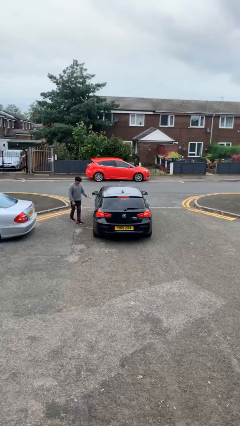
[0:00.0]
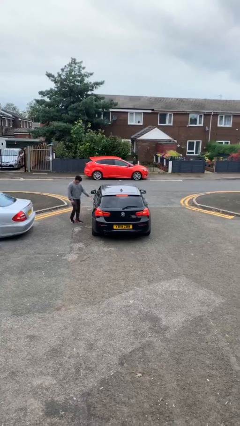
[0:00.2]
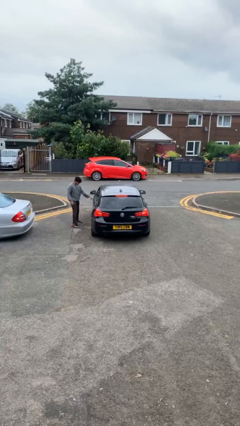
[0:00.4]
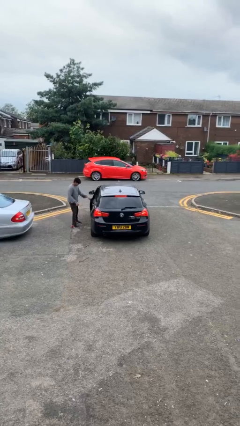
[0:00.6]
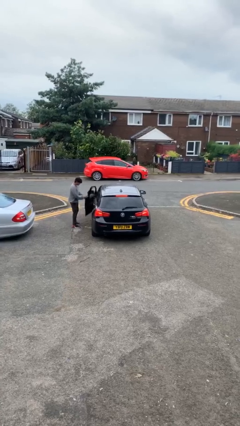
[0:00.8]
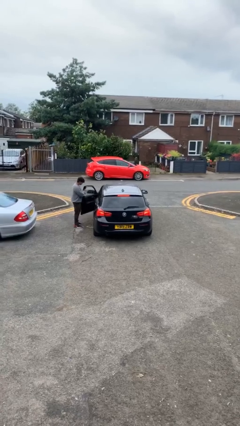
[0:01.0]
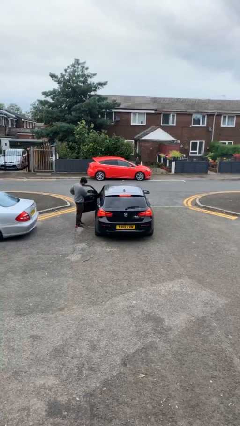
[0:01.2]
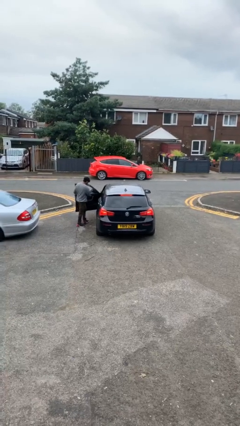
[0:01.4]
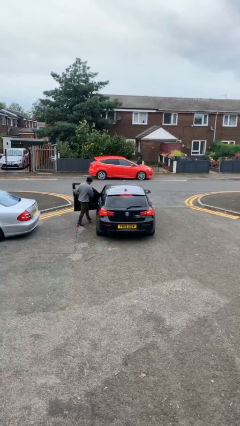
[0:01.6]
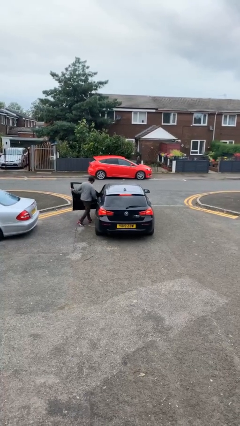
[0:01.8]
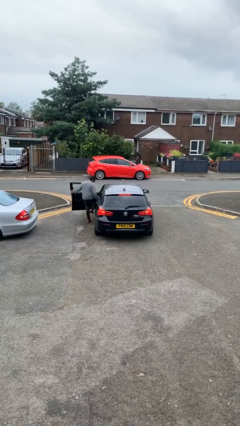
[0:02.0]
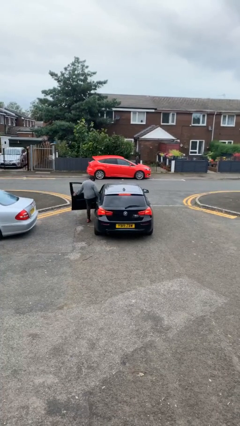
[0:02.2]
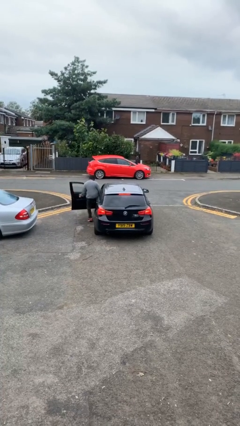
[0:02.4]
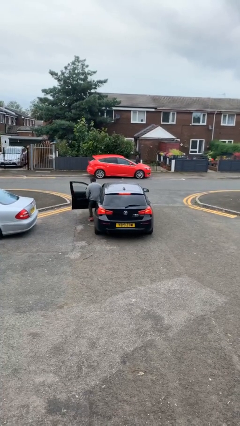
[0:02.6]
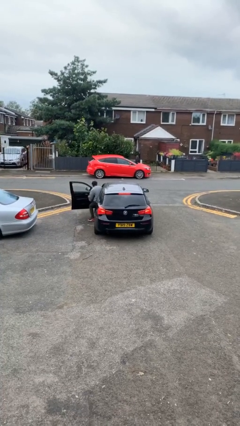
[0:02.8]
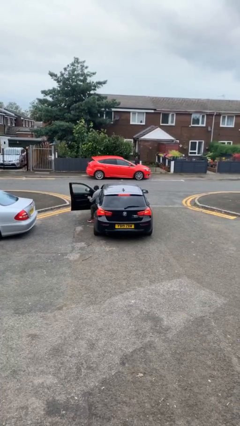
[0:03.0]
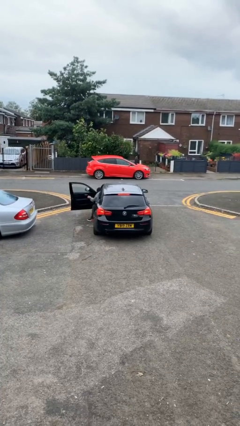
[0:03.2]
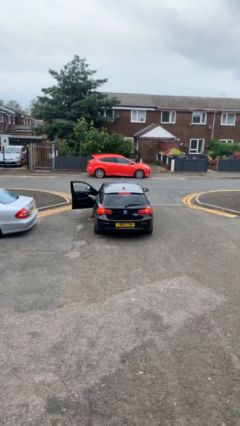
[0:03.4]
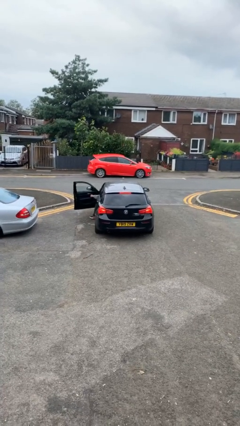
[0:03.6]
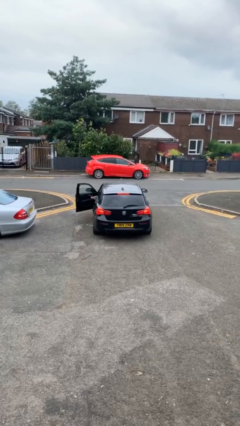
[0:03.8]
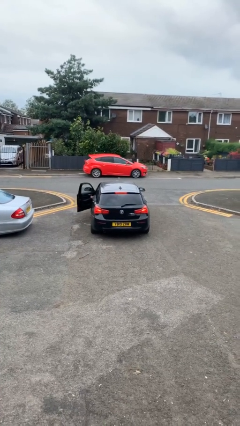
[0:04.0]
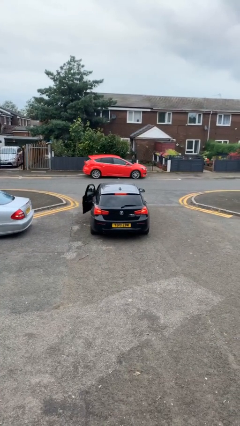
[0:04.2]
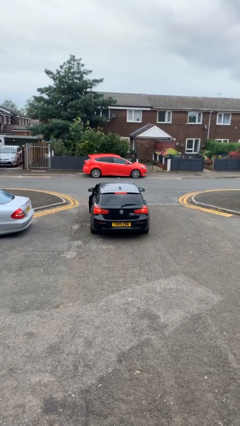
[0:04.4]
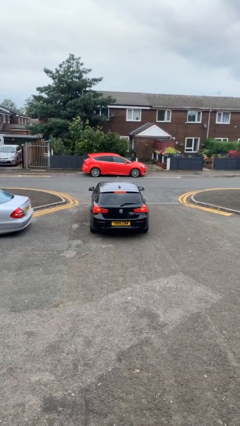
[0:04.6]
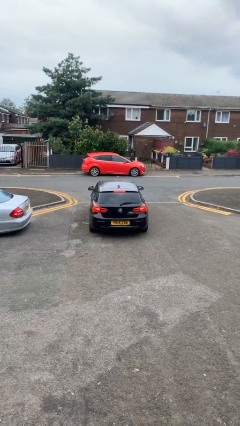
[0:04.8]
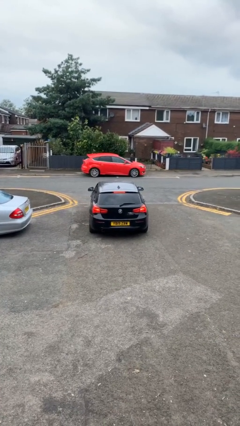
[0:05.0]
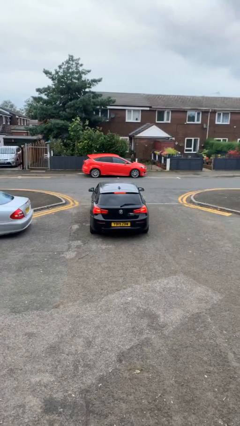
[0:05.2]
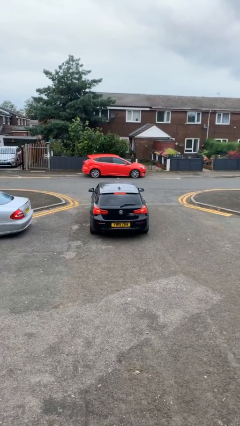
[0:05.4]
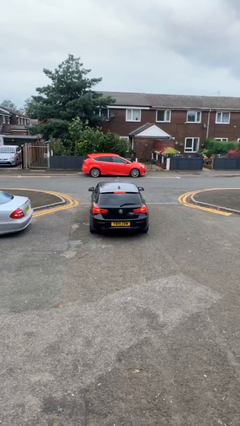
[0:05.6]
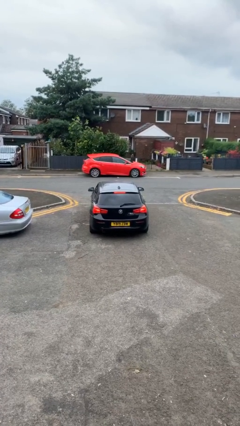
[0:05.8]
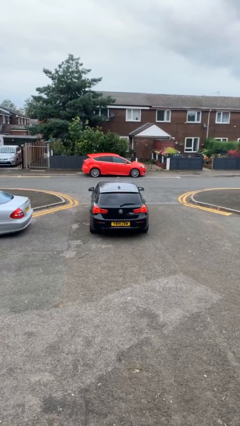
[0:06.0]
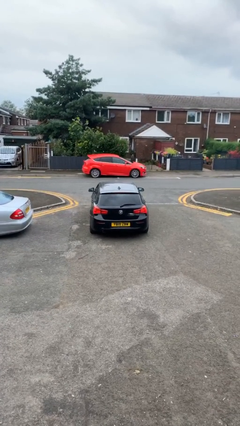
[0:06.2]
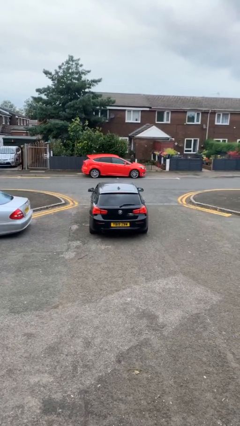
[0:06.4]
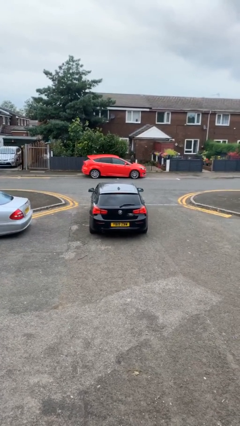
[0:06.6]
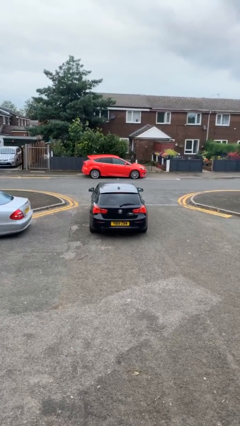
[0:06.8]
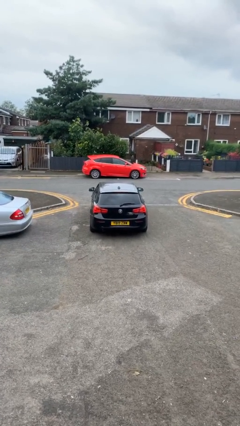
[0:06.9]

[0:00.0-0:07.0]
car picks up person

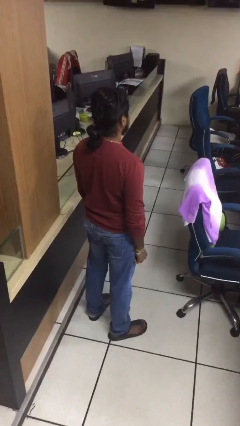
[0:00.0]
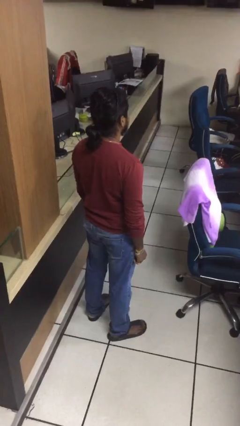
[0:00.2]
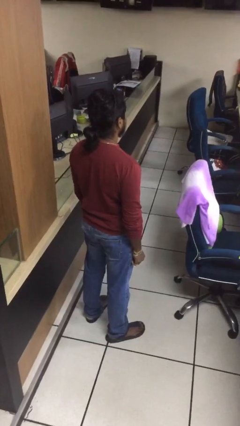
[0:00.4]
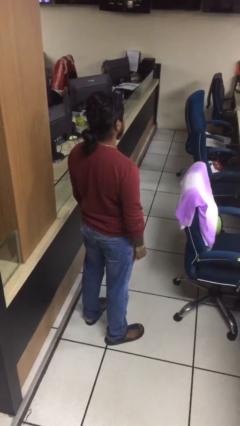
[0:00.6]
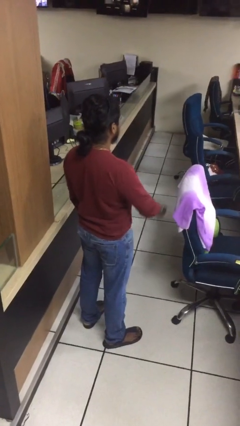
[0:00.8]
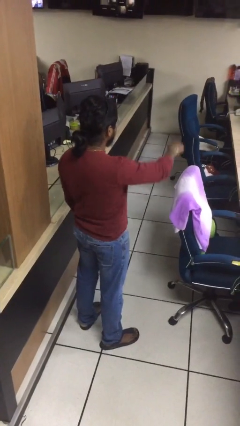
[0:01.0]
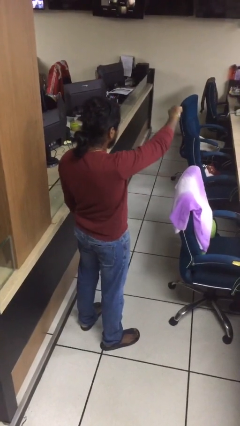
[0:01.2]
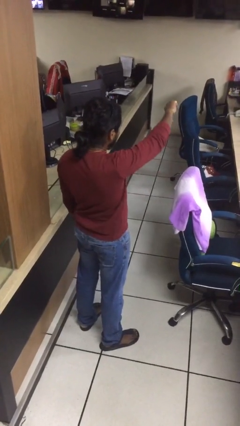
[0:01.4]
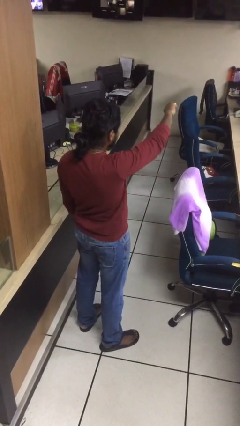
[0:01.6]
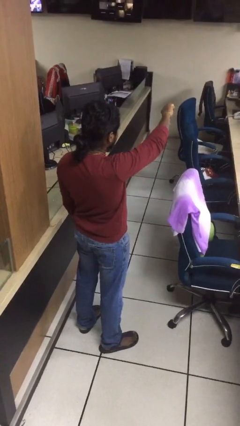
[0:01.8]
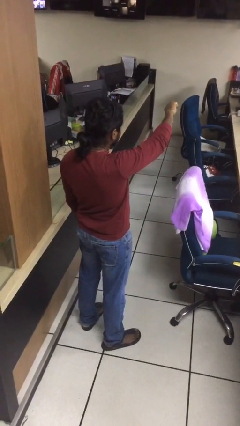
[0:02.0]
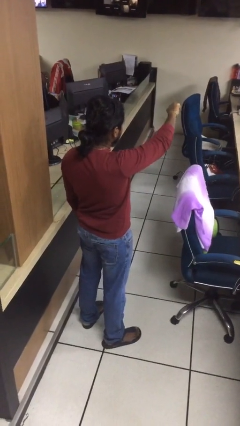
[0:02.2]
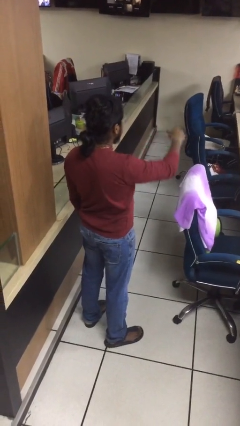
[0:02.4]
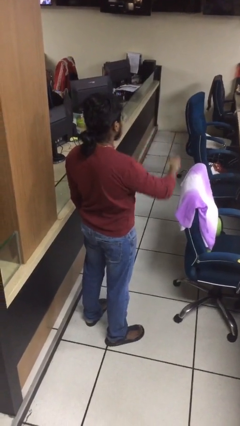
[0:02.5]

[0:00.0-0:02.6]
person gestures thumbs down

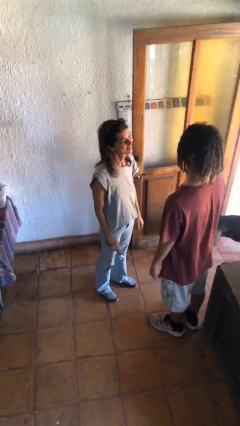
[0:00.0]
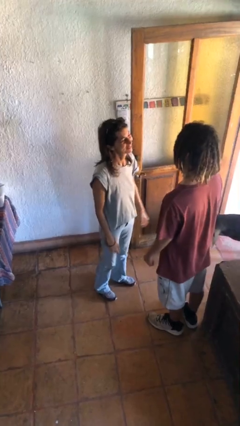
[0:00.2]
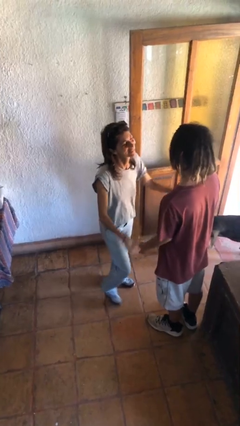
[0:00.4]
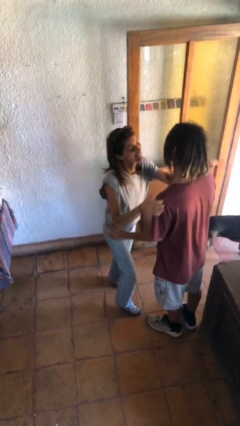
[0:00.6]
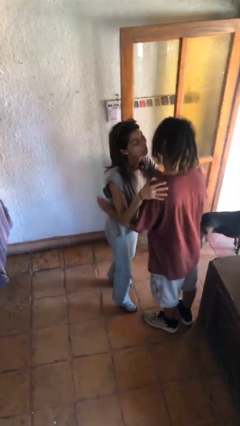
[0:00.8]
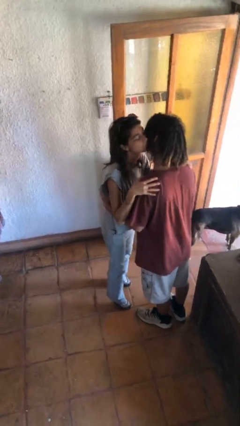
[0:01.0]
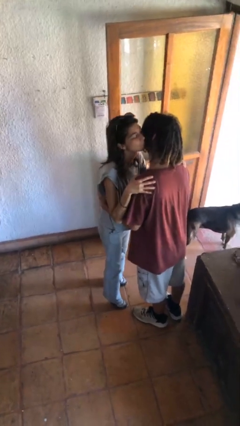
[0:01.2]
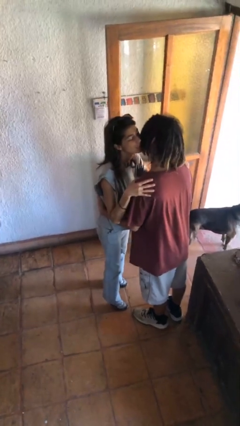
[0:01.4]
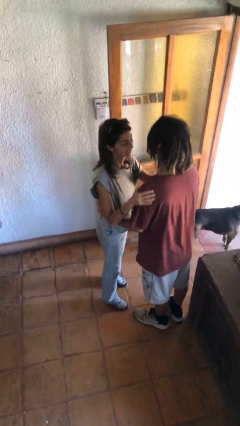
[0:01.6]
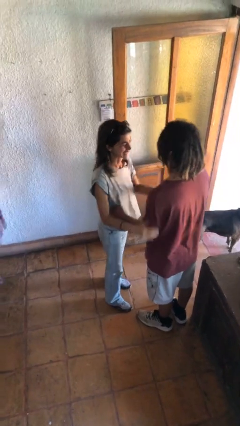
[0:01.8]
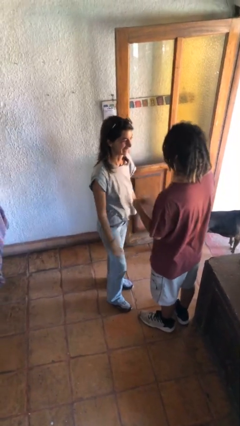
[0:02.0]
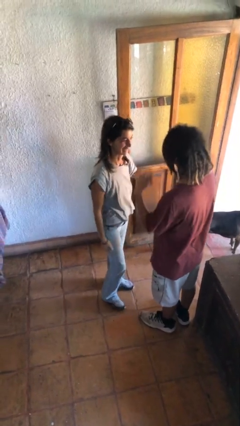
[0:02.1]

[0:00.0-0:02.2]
person kisses cheek of person

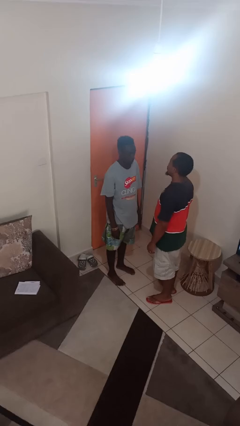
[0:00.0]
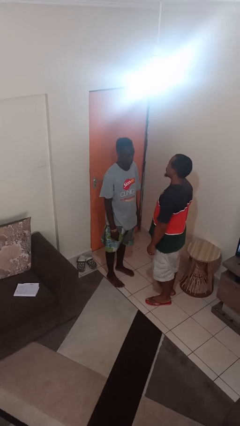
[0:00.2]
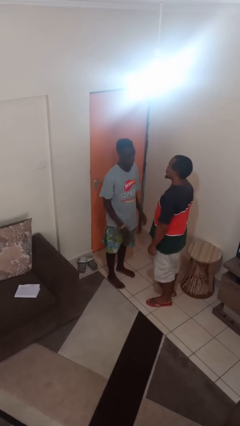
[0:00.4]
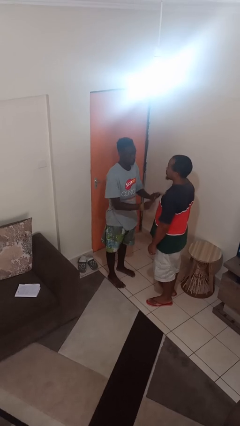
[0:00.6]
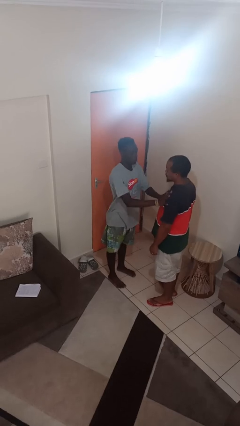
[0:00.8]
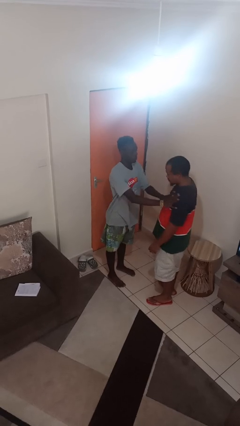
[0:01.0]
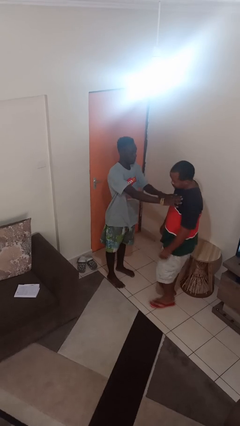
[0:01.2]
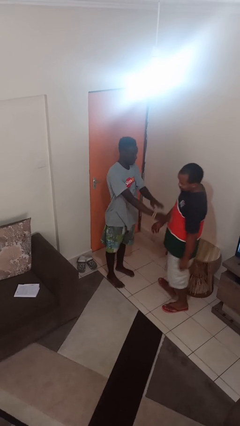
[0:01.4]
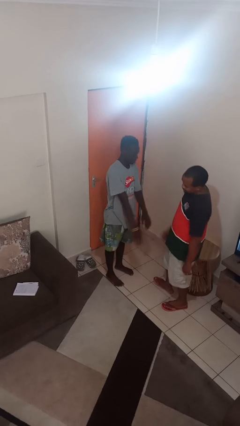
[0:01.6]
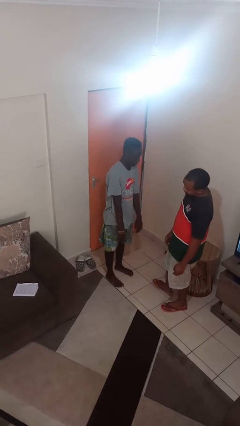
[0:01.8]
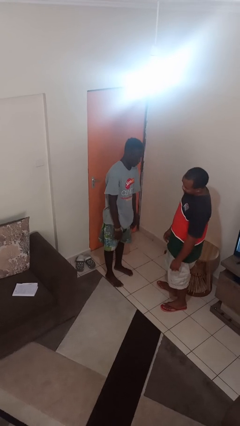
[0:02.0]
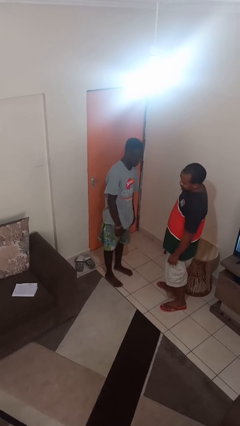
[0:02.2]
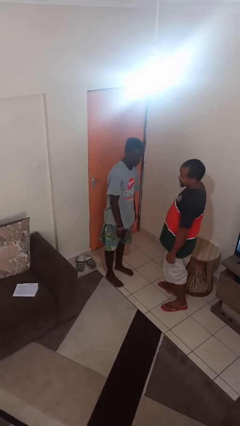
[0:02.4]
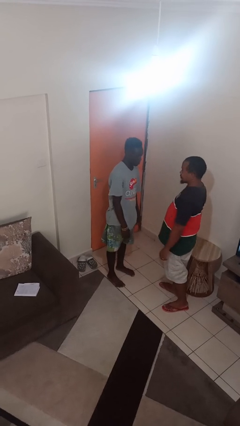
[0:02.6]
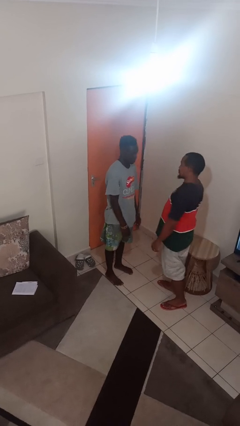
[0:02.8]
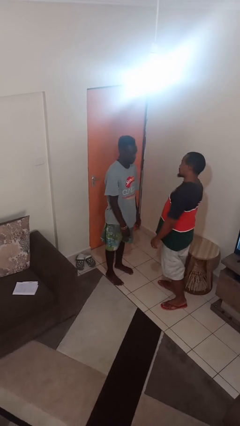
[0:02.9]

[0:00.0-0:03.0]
person shoves person

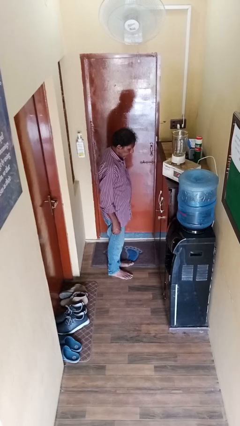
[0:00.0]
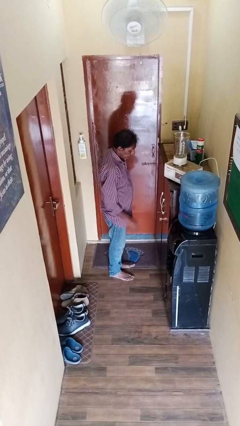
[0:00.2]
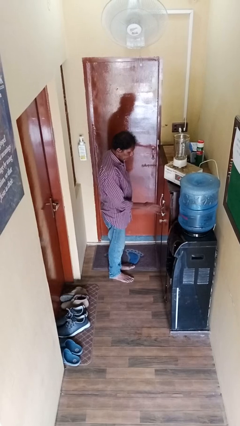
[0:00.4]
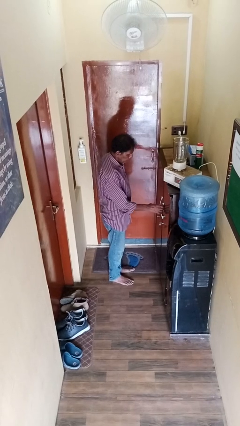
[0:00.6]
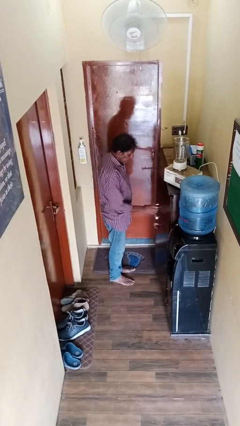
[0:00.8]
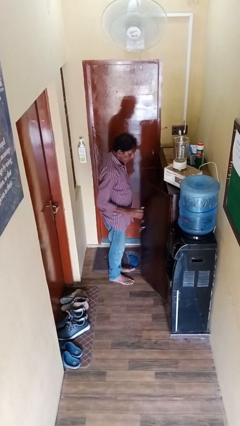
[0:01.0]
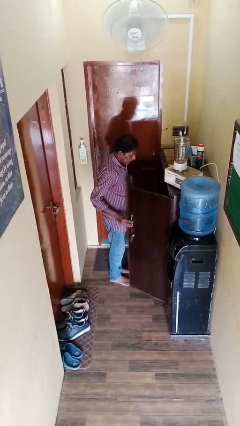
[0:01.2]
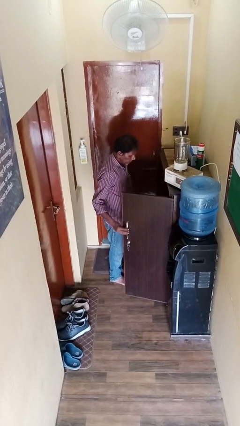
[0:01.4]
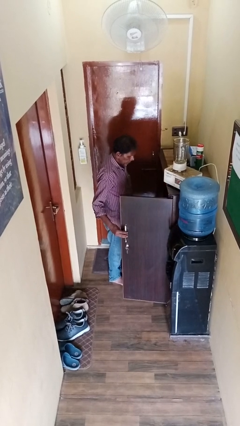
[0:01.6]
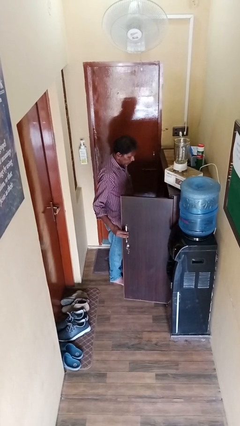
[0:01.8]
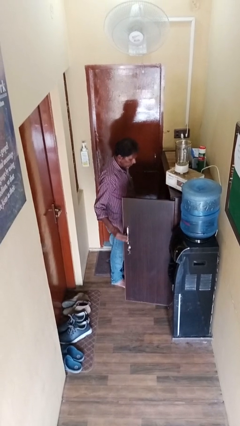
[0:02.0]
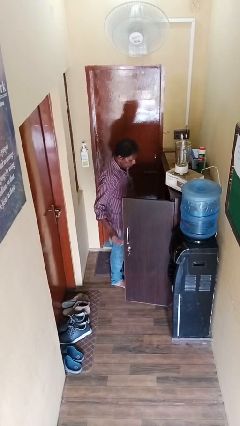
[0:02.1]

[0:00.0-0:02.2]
person opens cabinet
